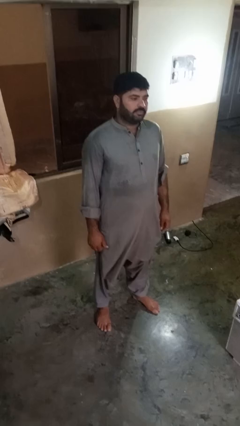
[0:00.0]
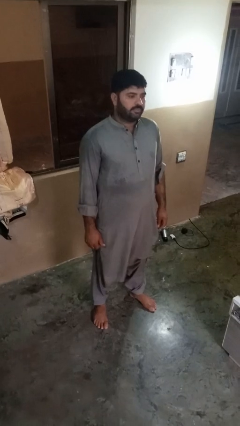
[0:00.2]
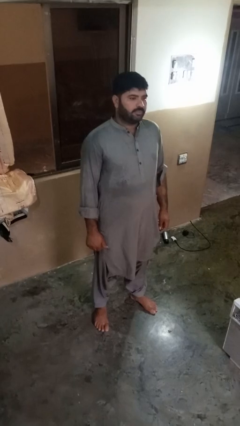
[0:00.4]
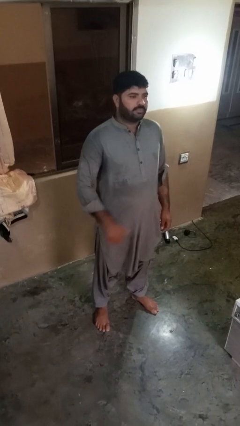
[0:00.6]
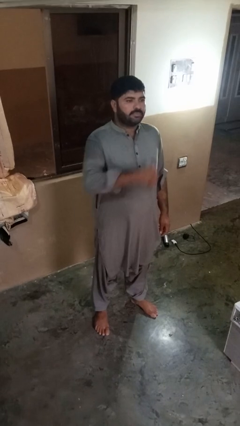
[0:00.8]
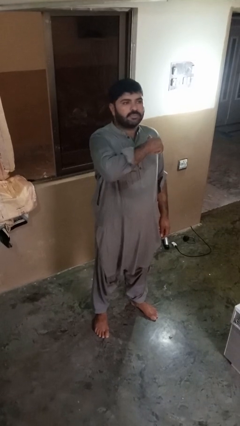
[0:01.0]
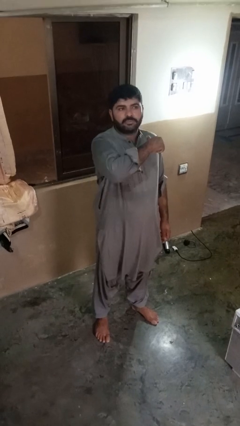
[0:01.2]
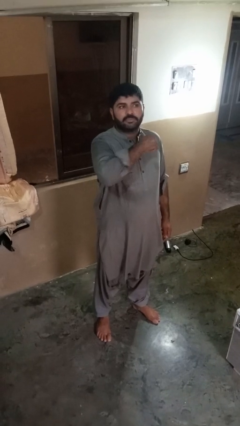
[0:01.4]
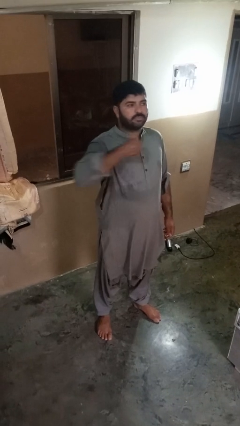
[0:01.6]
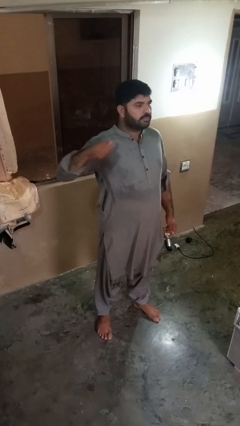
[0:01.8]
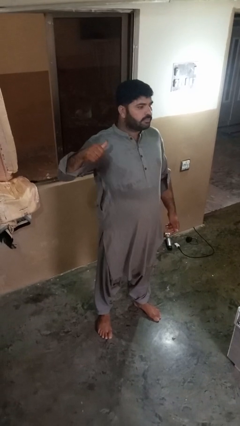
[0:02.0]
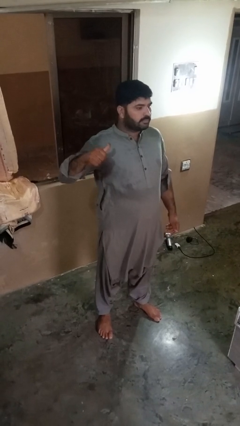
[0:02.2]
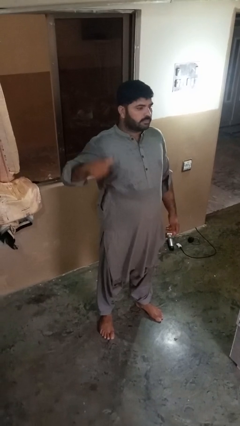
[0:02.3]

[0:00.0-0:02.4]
person gestures cut

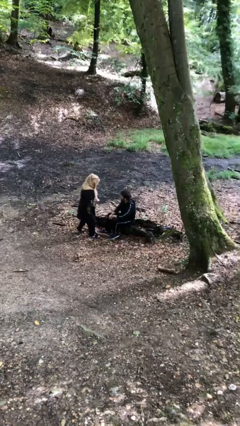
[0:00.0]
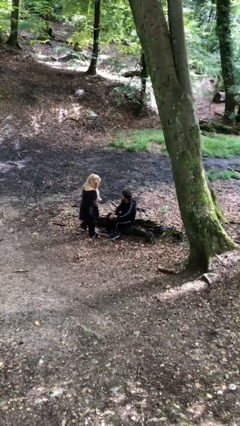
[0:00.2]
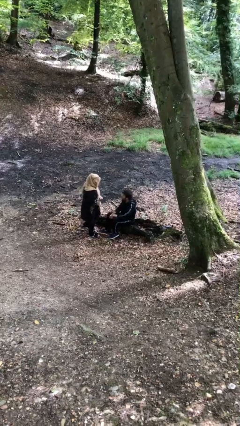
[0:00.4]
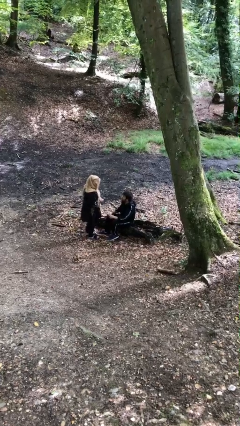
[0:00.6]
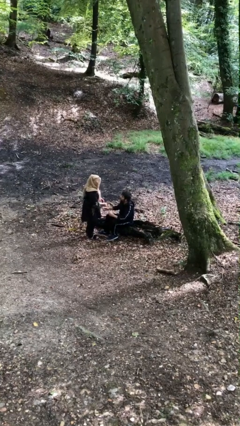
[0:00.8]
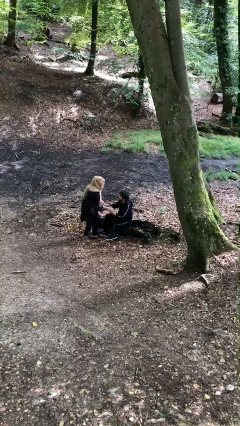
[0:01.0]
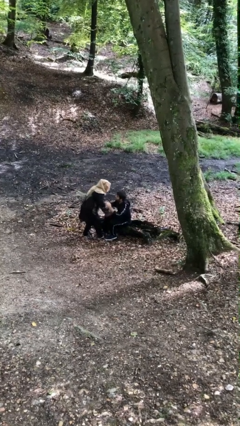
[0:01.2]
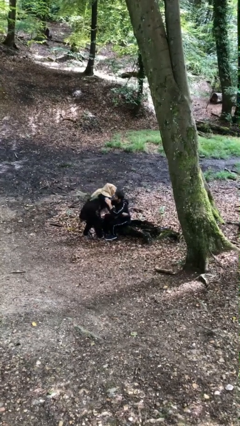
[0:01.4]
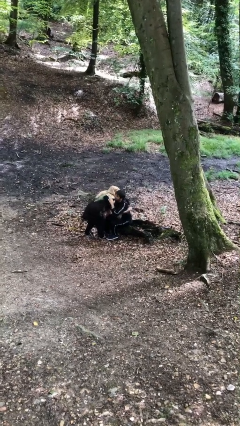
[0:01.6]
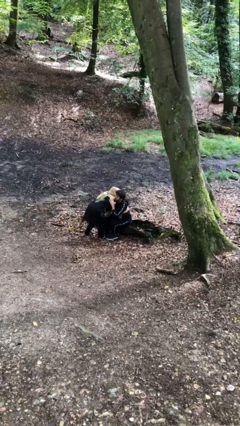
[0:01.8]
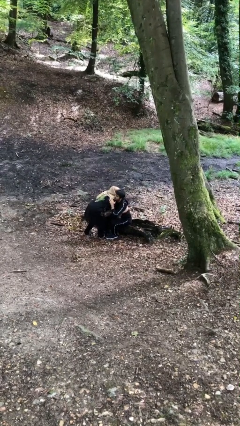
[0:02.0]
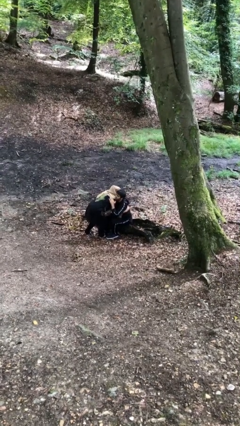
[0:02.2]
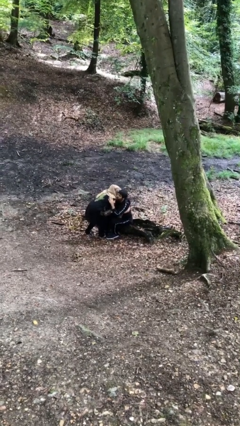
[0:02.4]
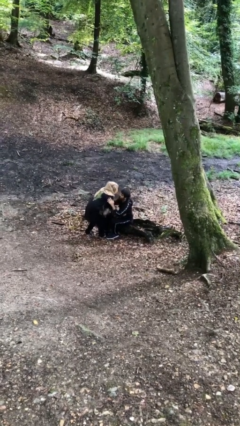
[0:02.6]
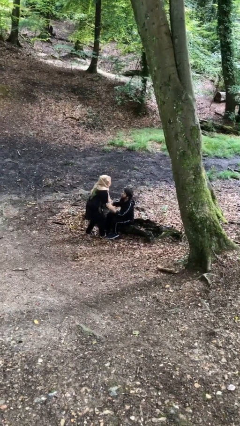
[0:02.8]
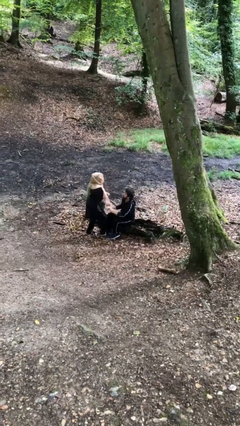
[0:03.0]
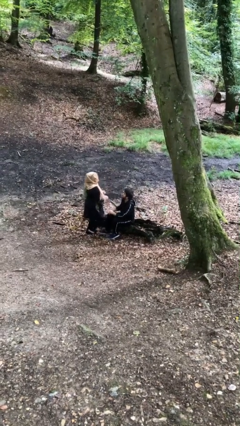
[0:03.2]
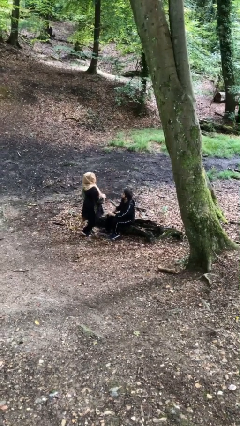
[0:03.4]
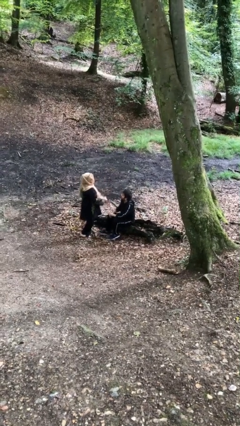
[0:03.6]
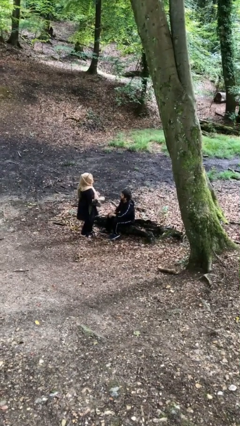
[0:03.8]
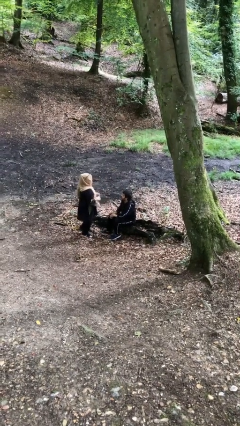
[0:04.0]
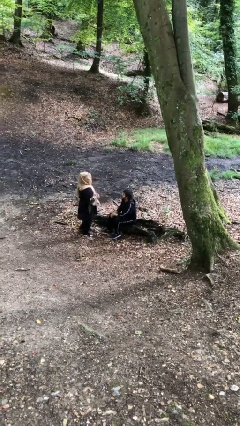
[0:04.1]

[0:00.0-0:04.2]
person embraces person

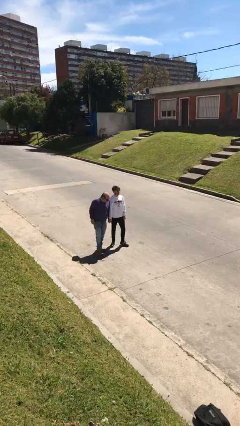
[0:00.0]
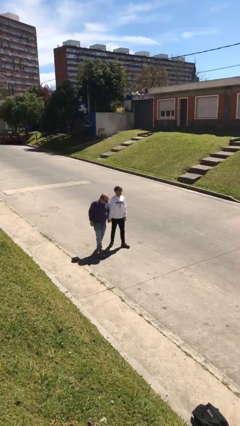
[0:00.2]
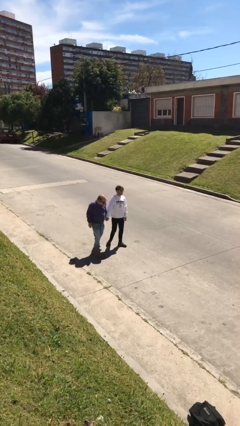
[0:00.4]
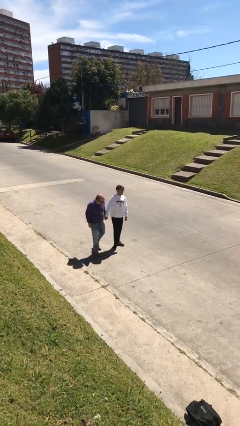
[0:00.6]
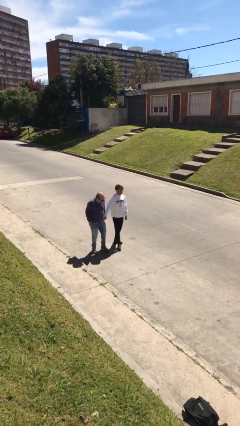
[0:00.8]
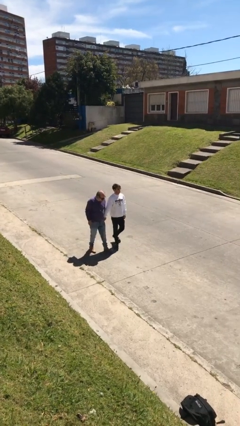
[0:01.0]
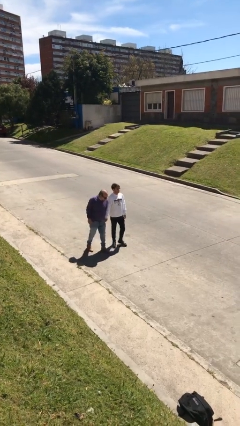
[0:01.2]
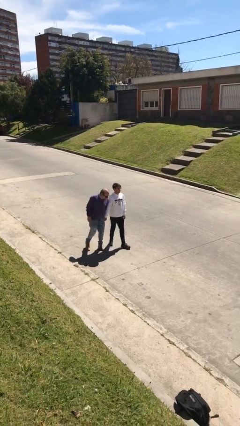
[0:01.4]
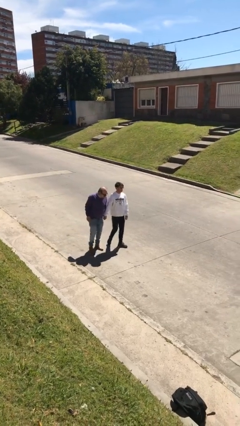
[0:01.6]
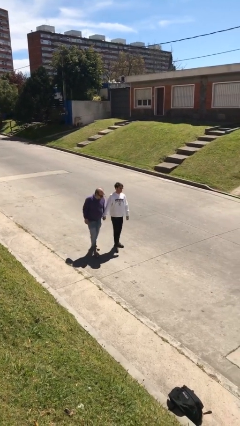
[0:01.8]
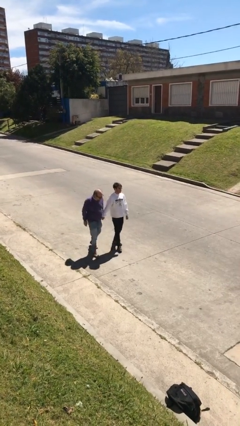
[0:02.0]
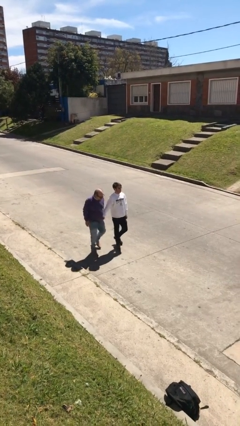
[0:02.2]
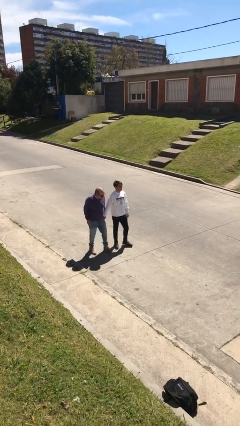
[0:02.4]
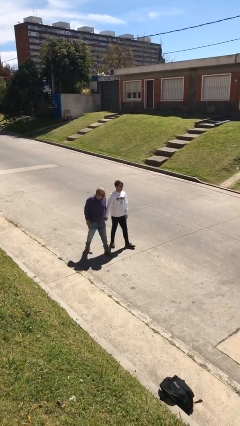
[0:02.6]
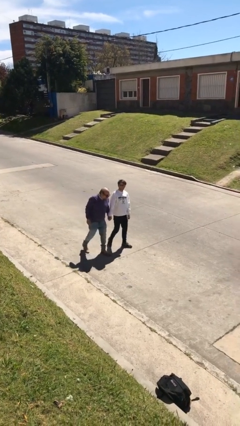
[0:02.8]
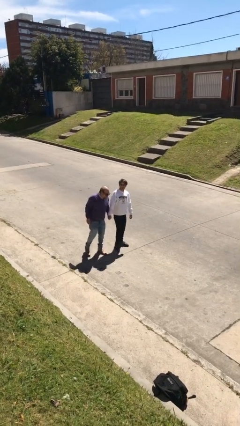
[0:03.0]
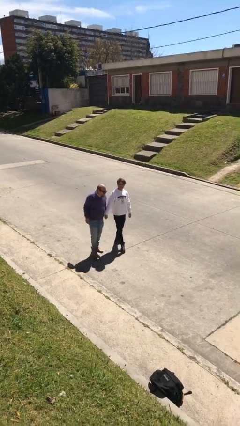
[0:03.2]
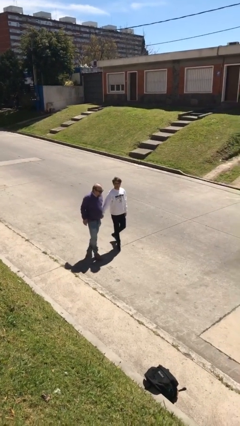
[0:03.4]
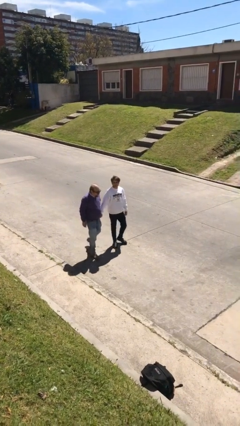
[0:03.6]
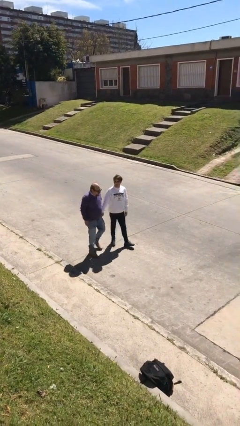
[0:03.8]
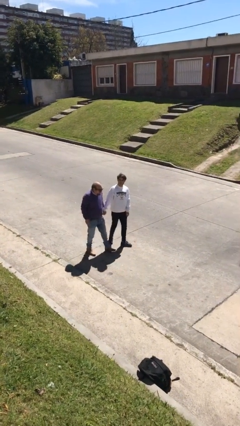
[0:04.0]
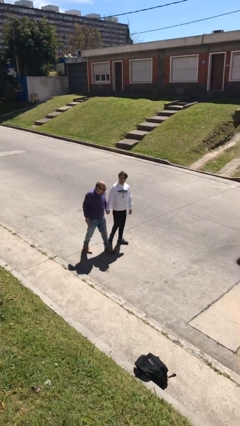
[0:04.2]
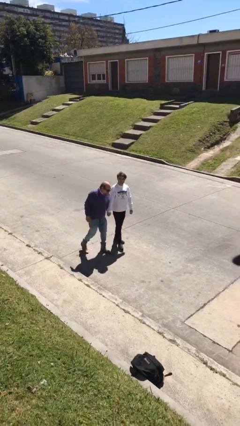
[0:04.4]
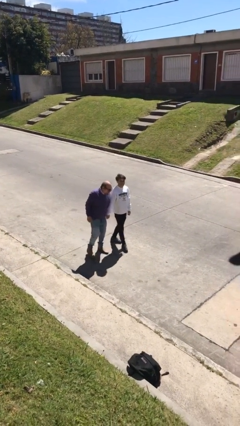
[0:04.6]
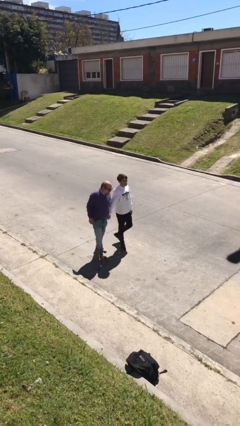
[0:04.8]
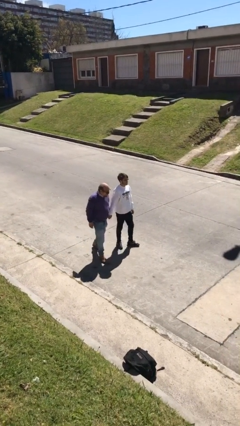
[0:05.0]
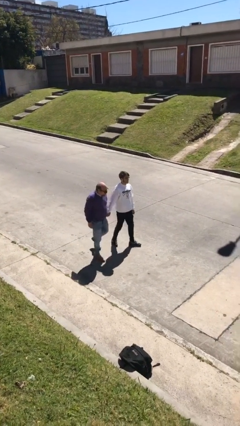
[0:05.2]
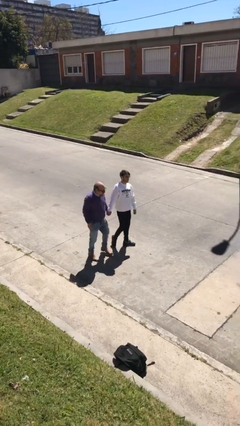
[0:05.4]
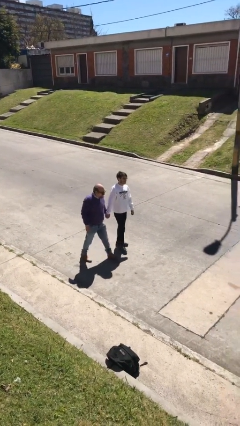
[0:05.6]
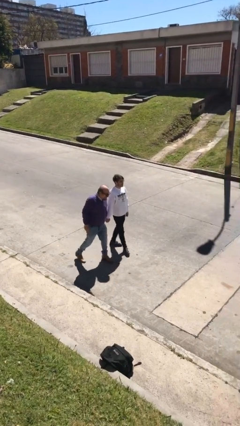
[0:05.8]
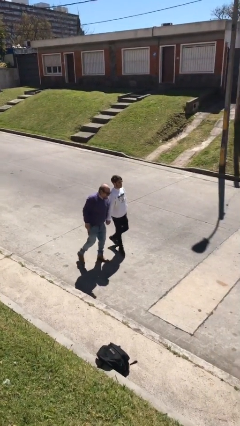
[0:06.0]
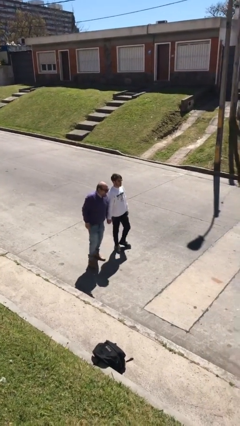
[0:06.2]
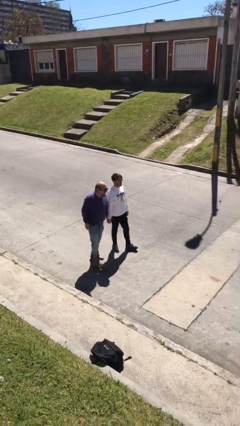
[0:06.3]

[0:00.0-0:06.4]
person holds hand

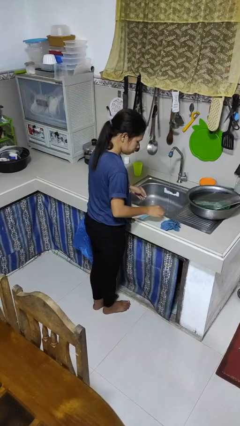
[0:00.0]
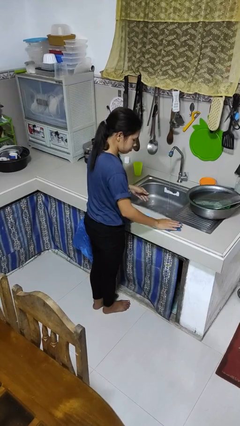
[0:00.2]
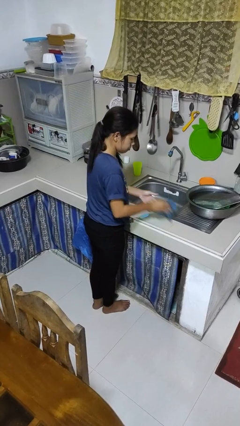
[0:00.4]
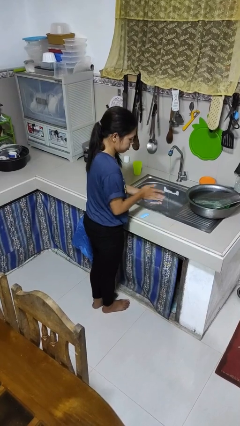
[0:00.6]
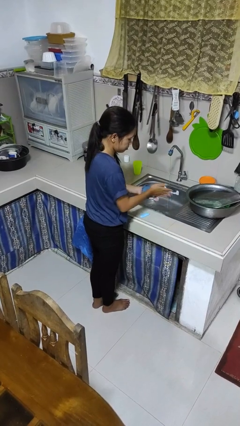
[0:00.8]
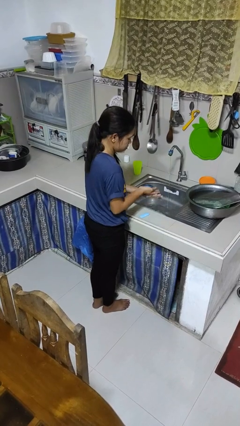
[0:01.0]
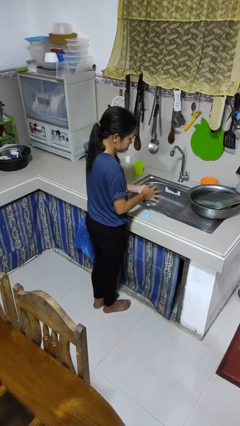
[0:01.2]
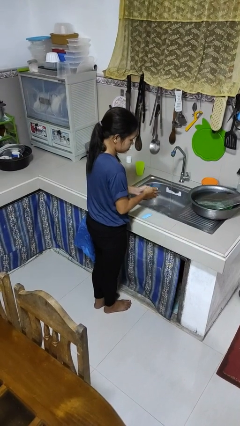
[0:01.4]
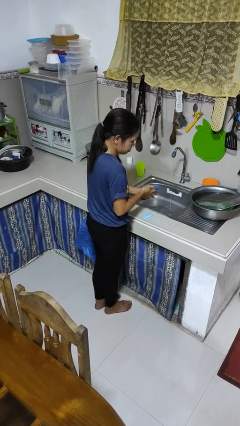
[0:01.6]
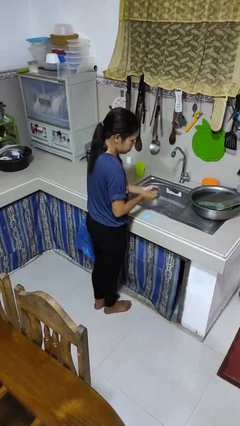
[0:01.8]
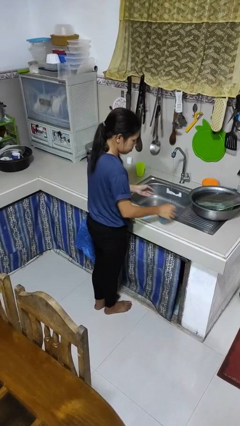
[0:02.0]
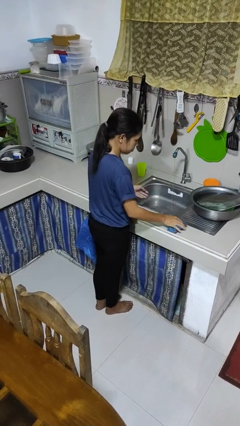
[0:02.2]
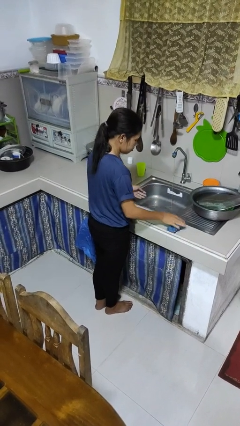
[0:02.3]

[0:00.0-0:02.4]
person dries hands with towel

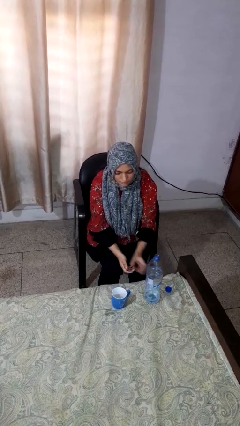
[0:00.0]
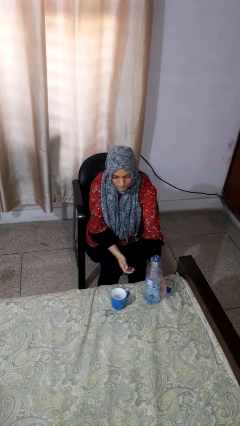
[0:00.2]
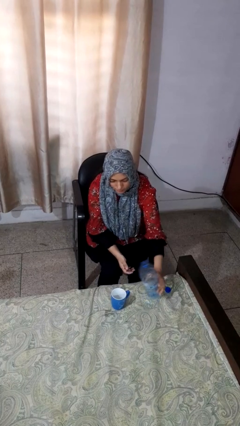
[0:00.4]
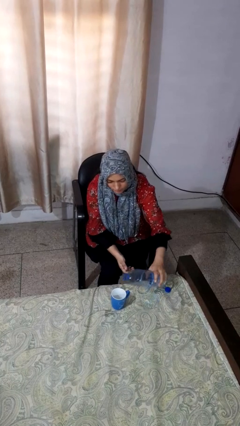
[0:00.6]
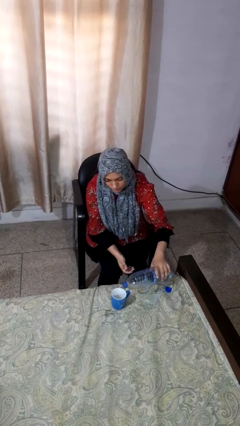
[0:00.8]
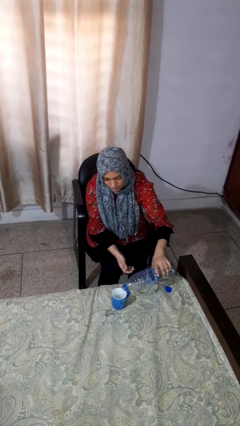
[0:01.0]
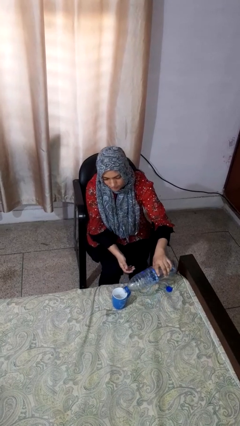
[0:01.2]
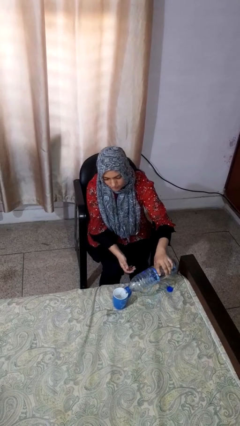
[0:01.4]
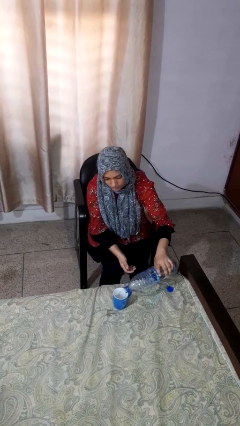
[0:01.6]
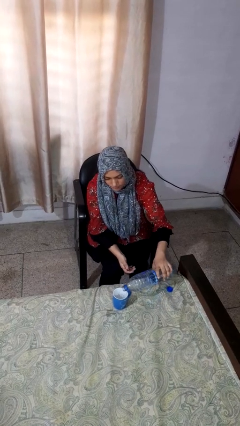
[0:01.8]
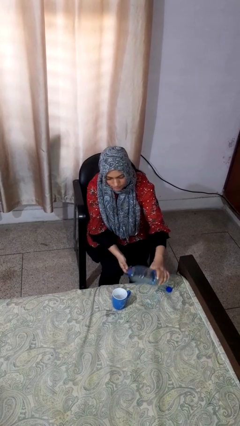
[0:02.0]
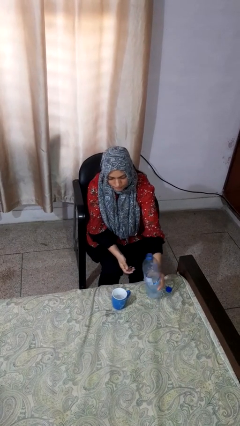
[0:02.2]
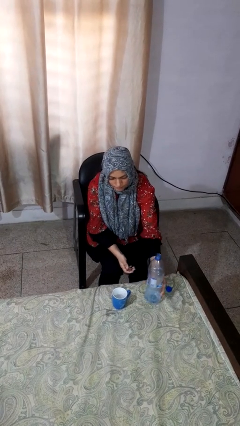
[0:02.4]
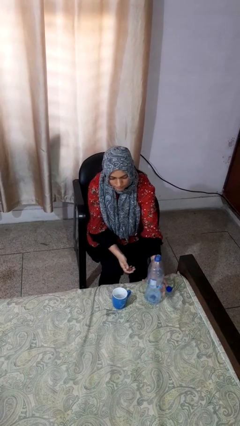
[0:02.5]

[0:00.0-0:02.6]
person pours liquid into cup
